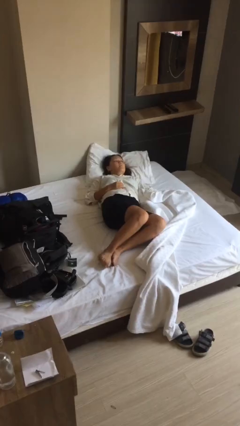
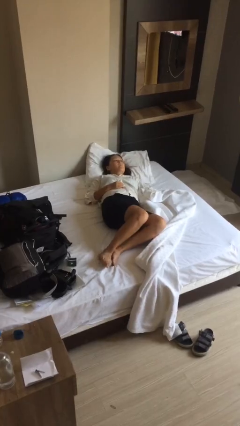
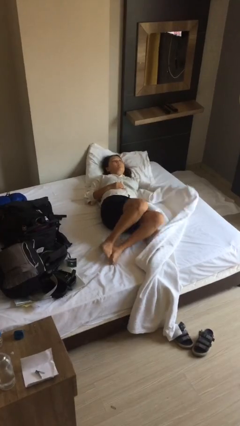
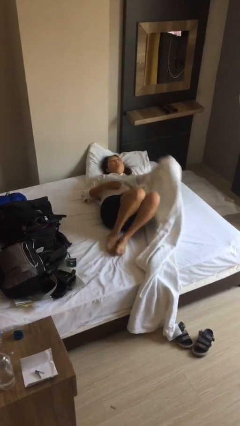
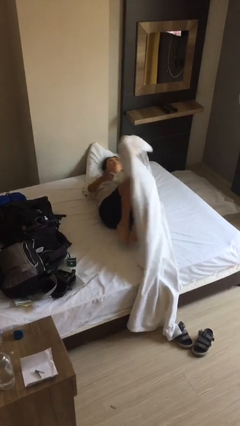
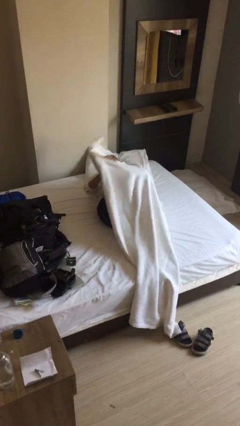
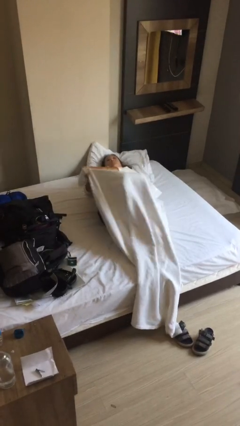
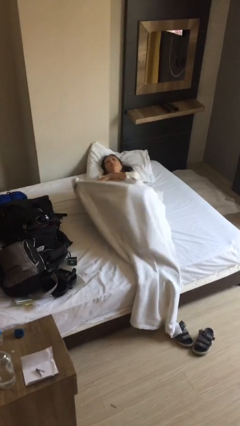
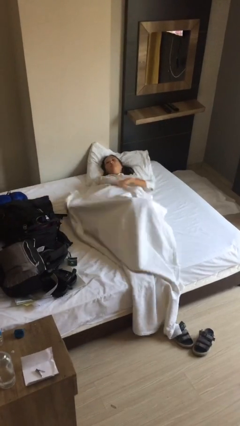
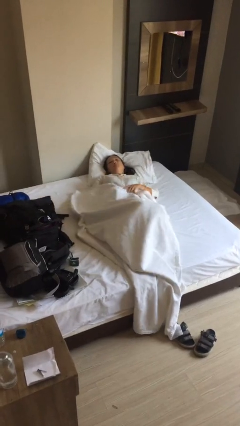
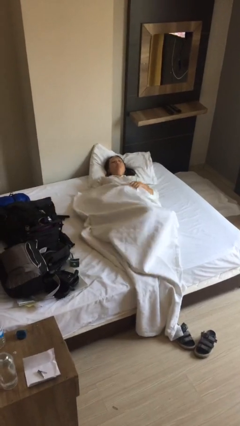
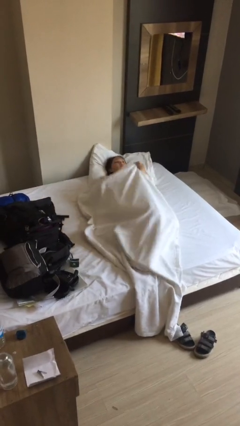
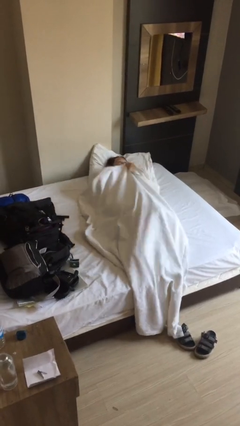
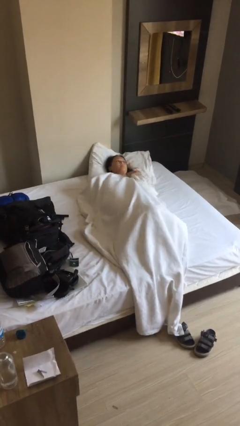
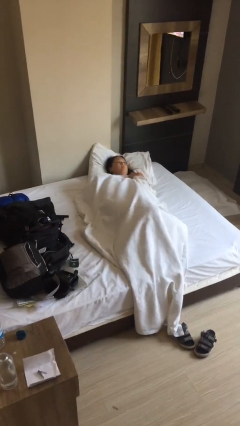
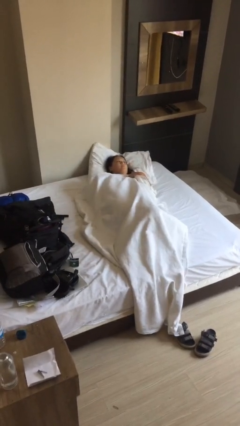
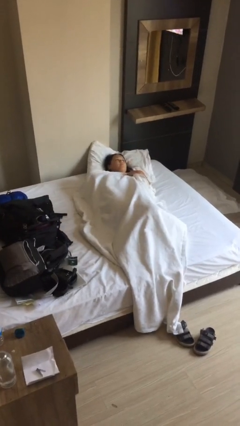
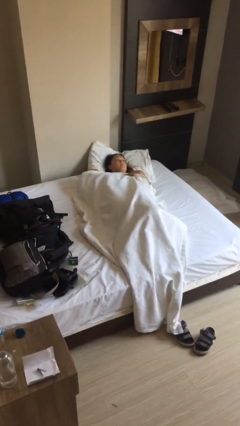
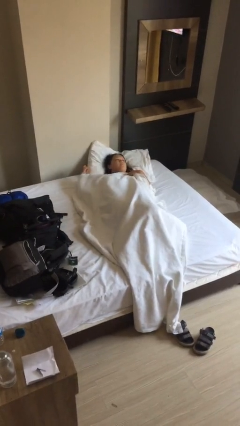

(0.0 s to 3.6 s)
person covers with bedsheets

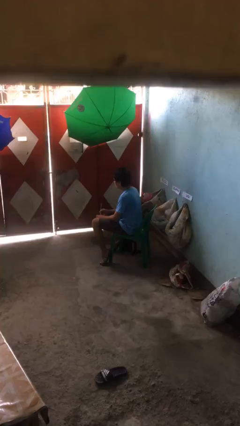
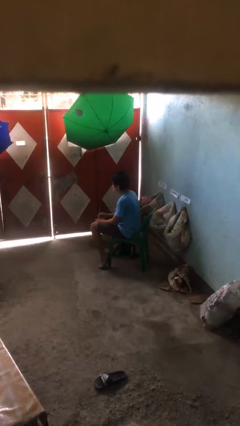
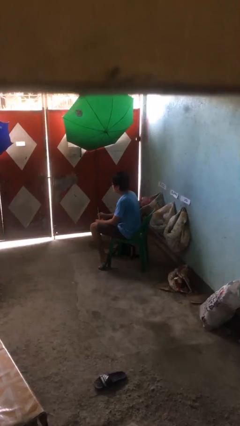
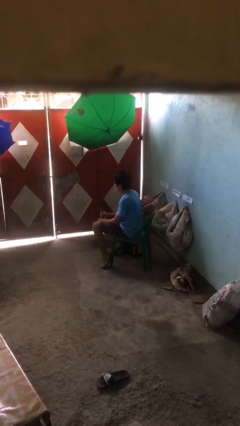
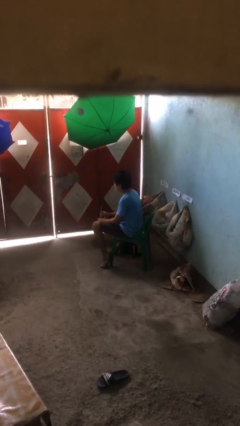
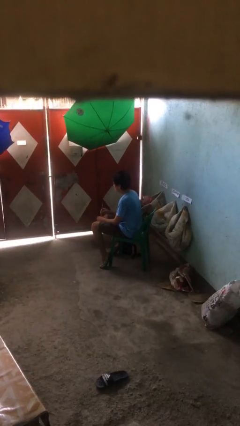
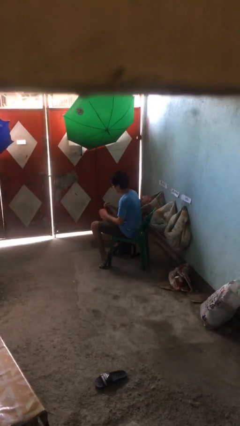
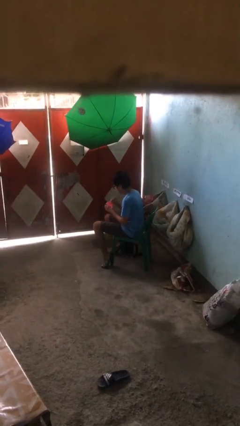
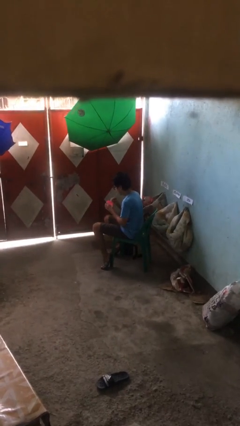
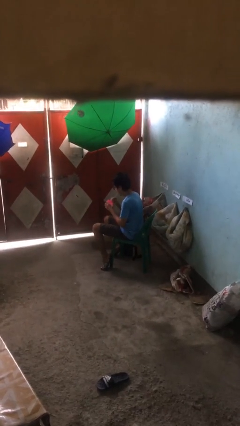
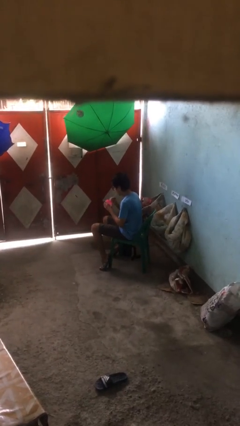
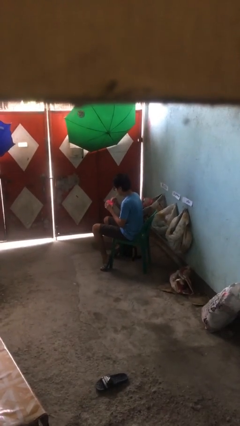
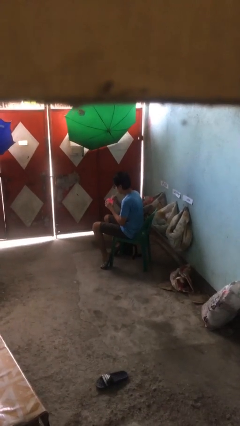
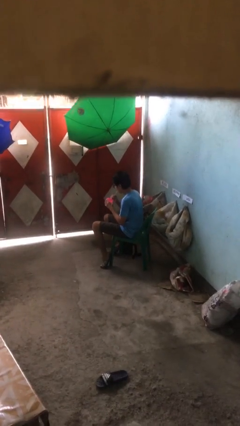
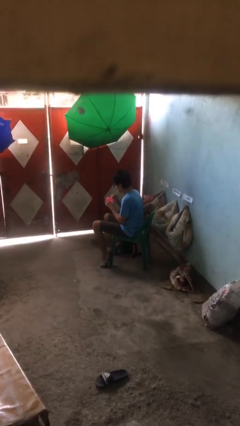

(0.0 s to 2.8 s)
person drinks from straw

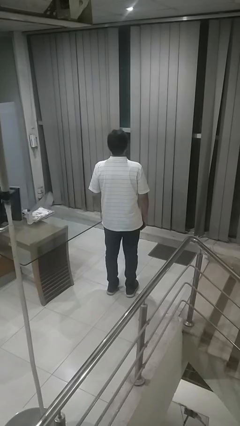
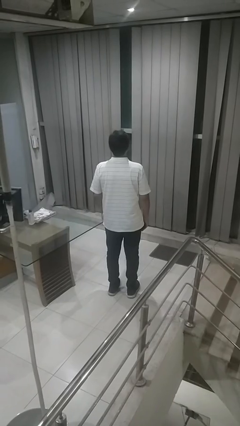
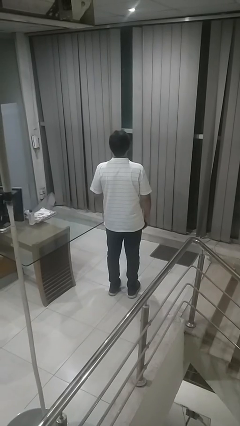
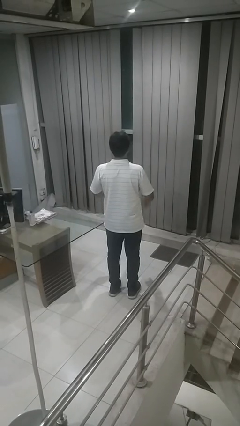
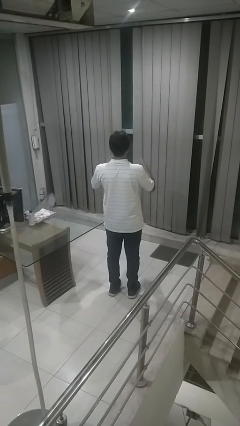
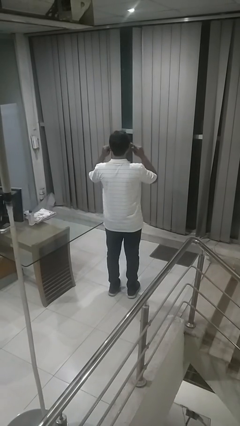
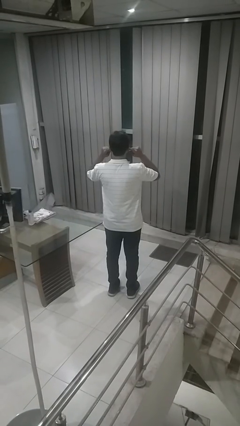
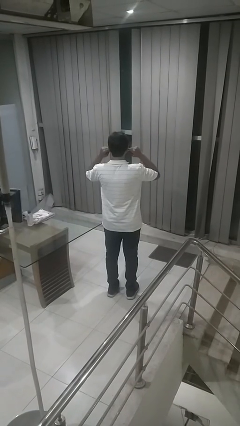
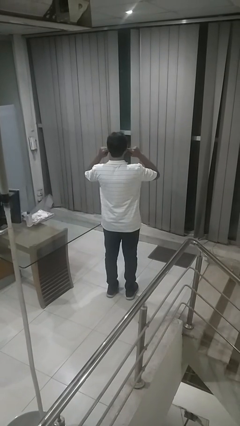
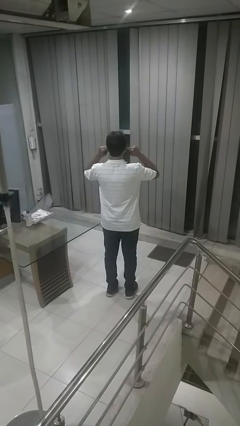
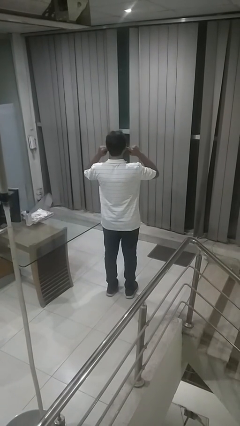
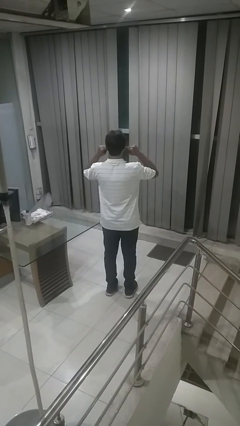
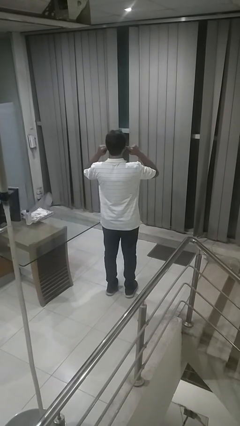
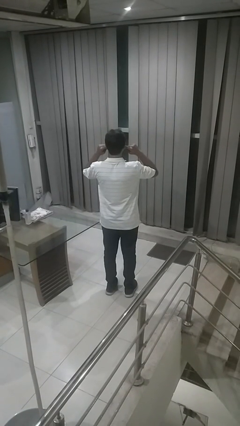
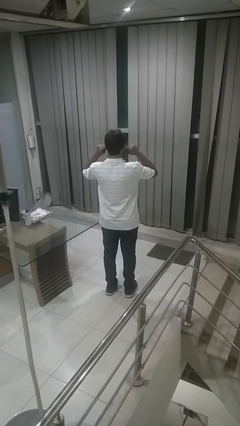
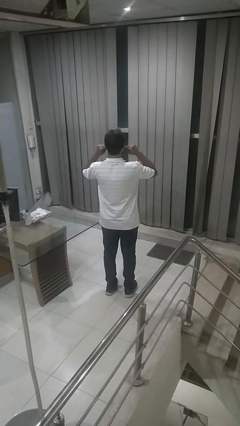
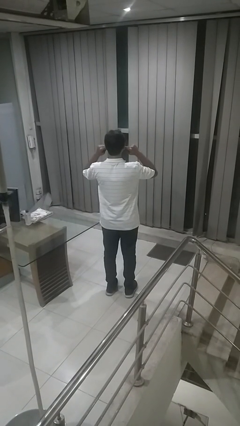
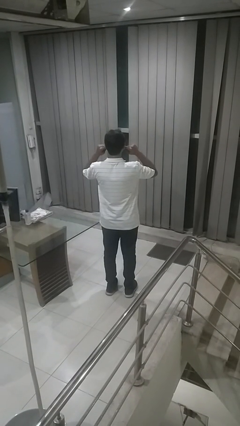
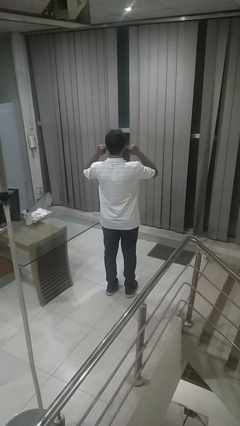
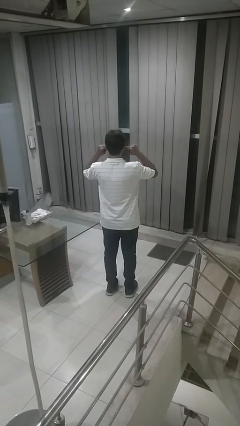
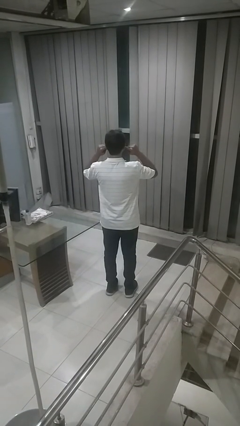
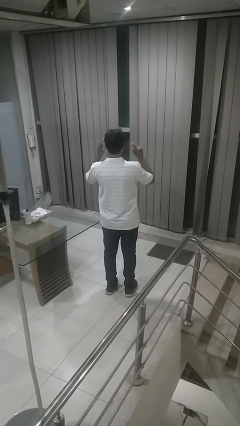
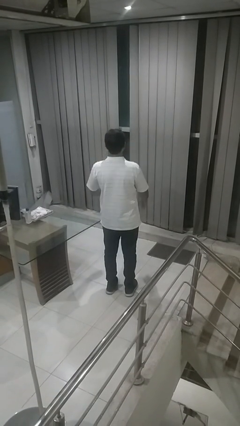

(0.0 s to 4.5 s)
person puts fingers in ear

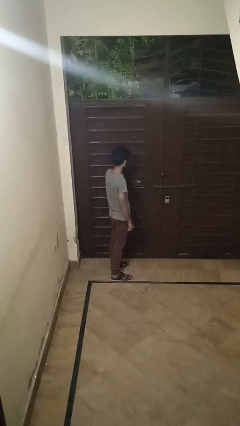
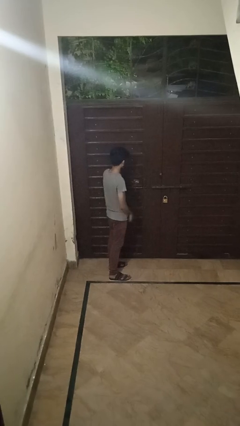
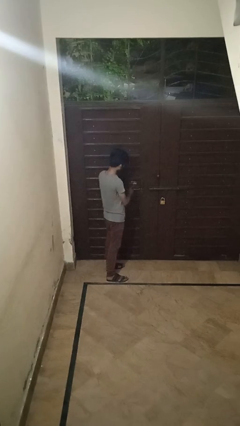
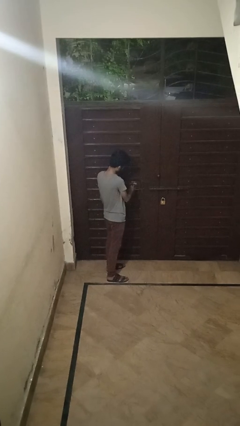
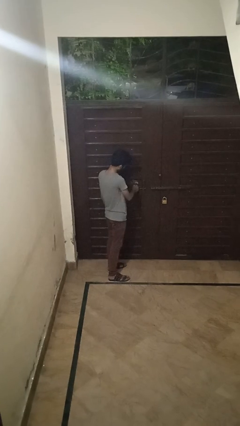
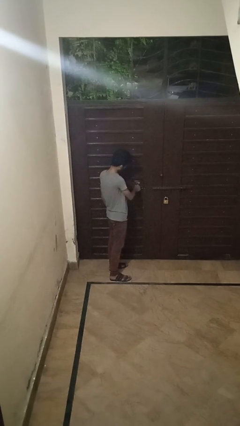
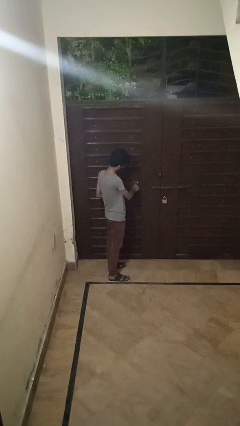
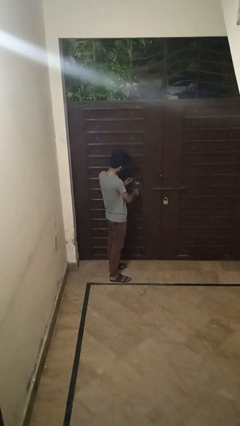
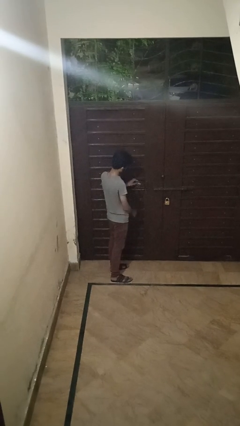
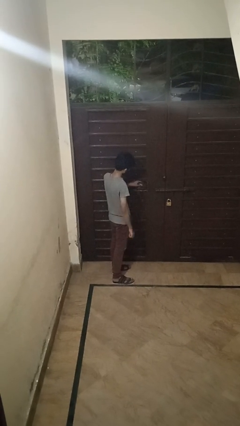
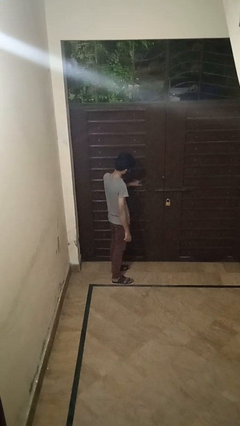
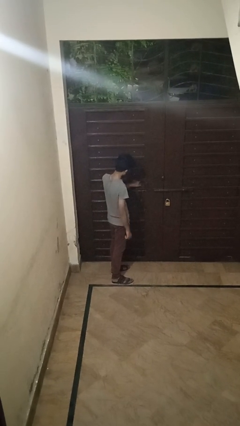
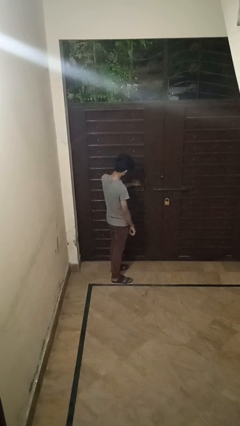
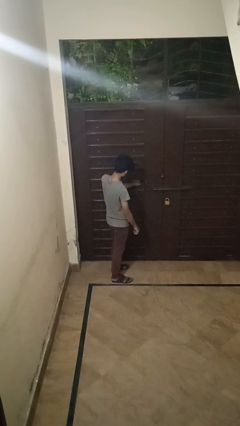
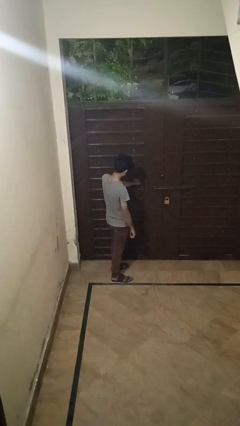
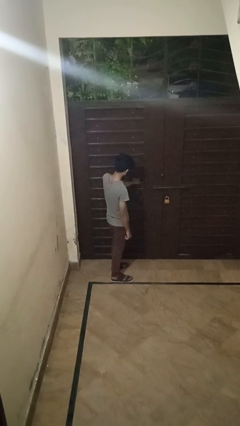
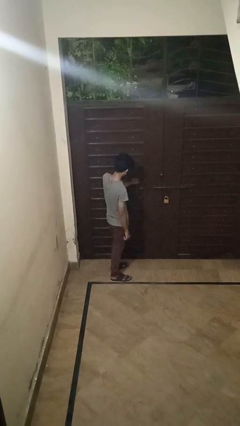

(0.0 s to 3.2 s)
person unlocks door with keys

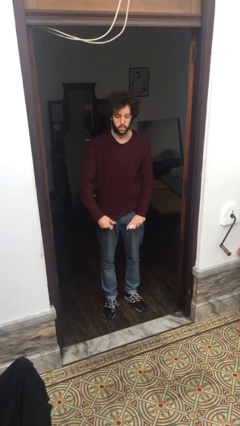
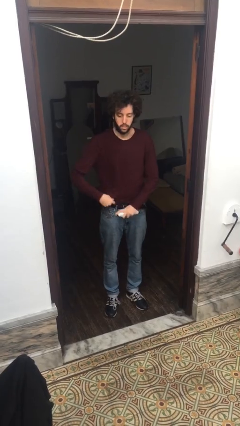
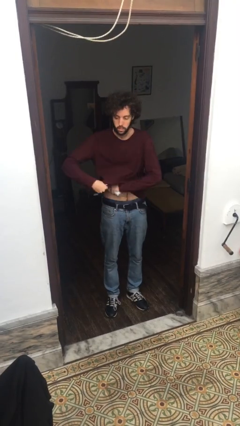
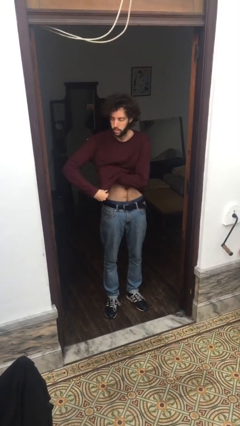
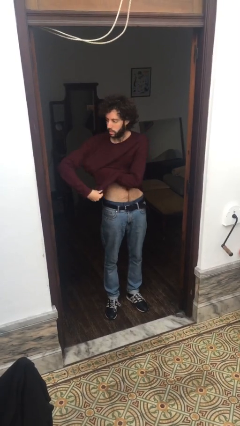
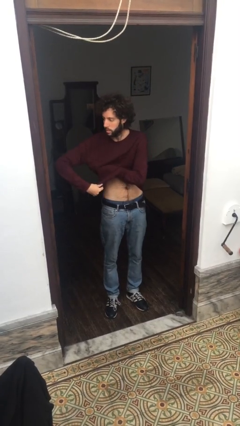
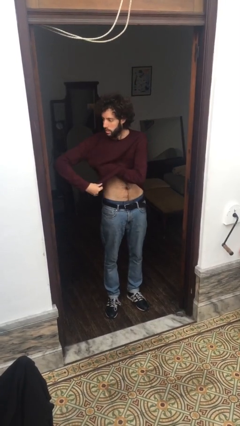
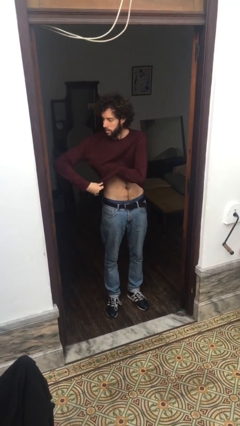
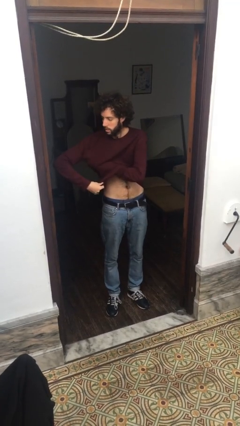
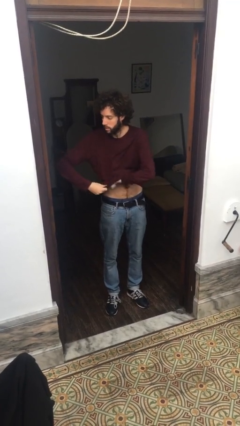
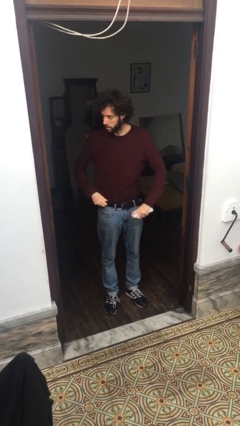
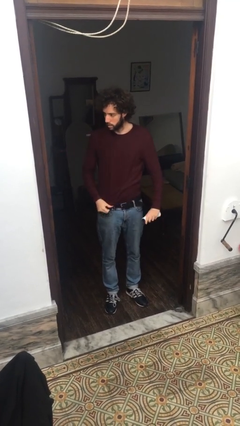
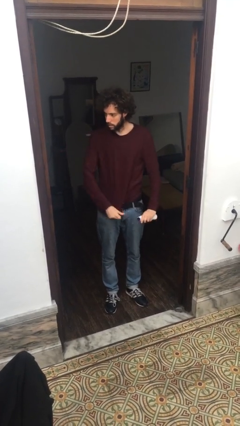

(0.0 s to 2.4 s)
person applies deodorant

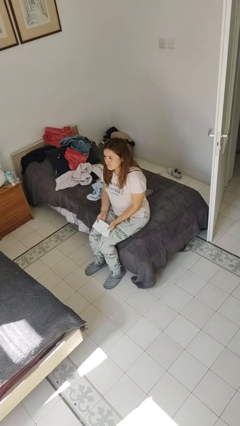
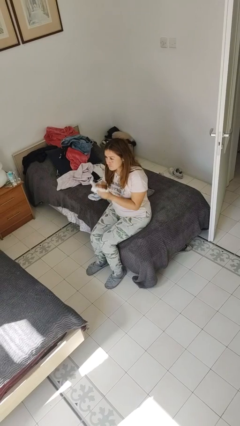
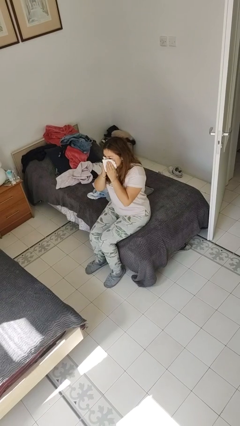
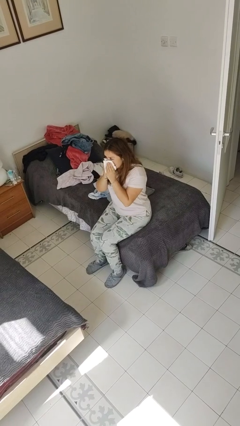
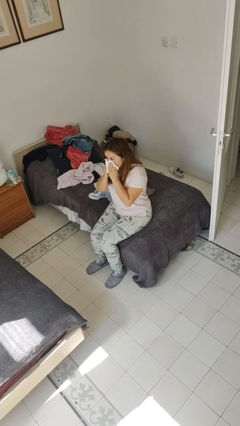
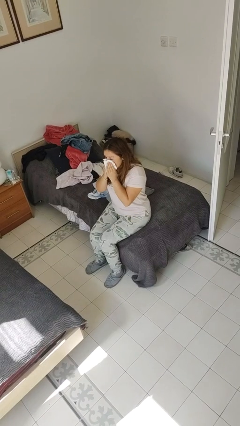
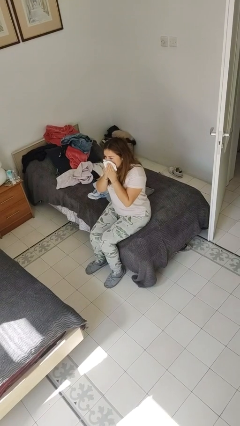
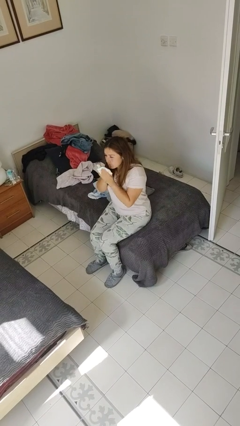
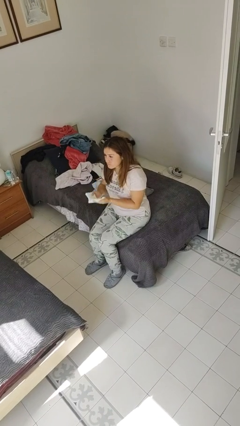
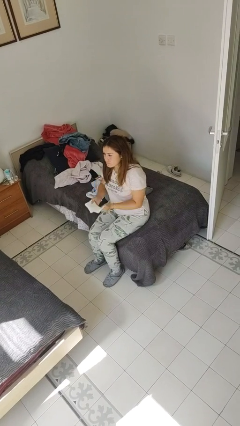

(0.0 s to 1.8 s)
person blows nose
